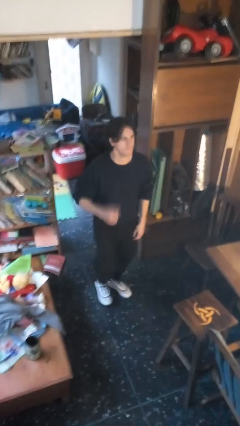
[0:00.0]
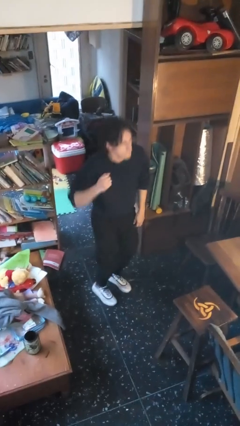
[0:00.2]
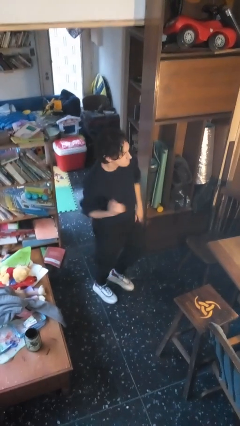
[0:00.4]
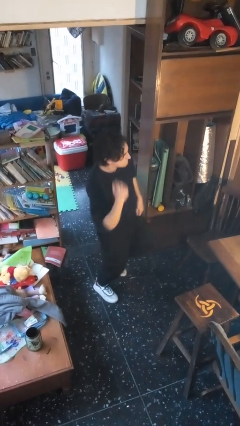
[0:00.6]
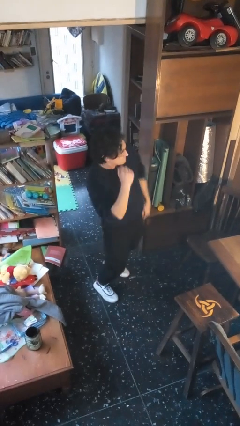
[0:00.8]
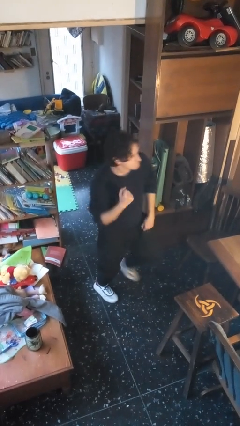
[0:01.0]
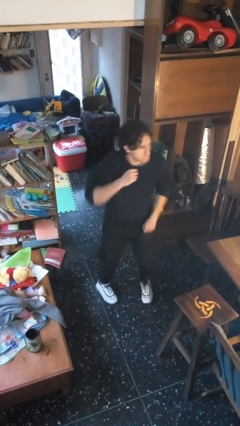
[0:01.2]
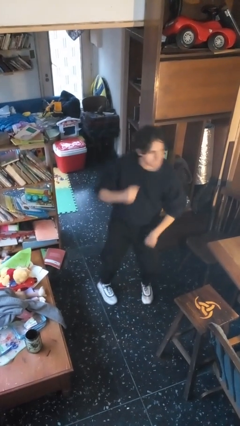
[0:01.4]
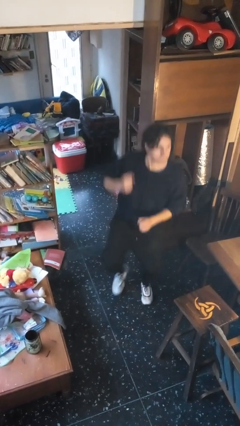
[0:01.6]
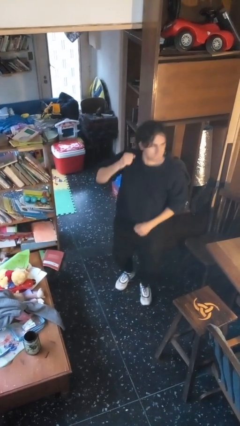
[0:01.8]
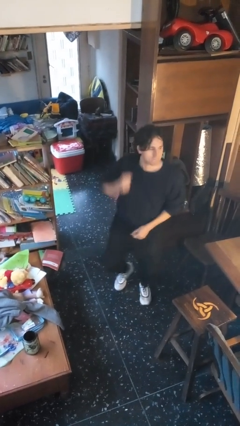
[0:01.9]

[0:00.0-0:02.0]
person dances in place

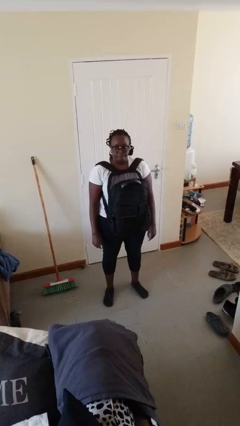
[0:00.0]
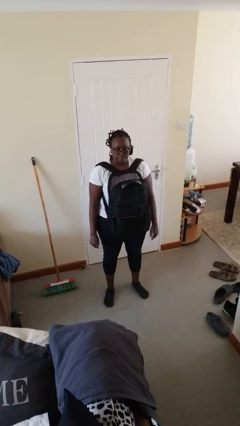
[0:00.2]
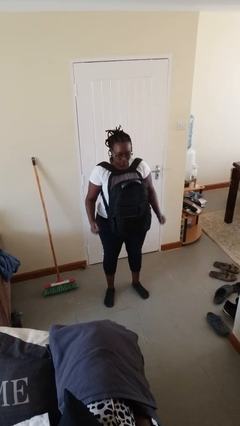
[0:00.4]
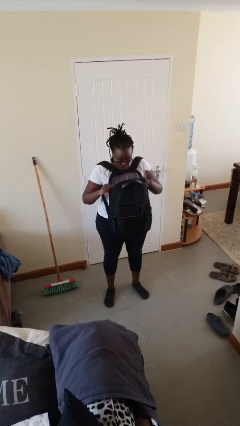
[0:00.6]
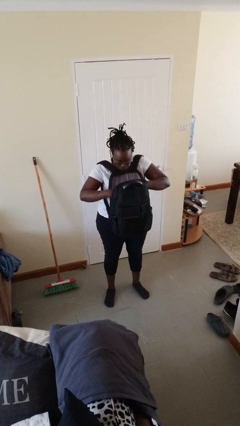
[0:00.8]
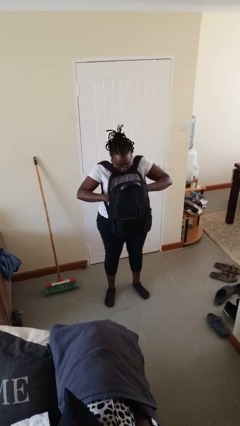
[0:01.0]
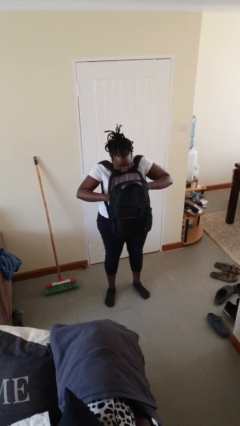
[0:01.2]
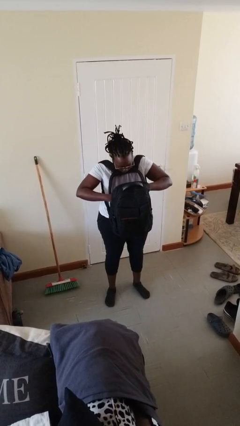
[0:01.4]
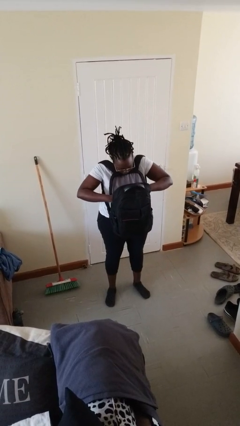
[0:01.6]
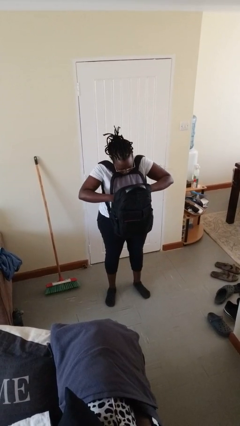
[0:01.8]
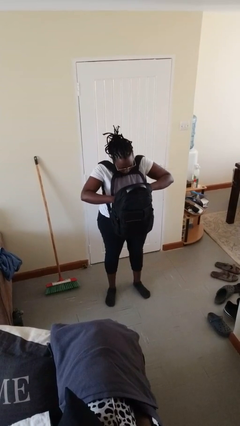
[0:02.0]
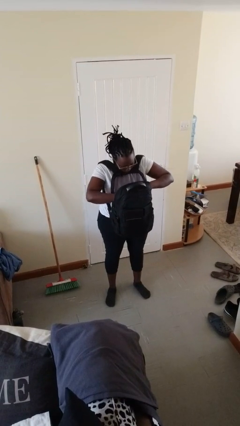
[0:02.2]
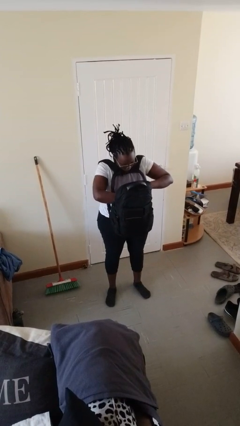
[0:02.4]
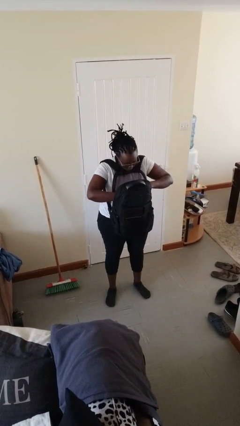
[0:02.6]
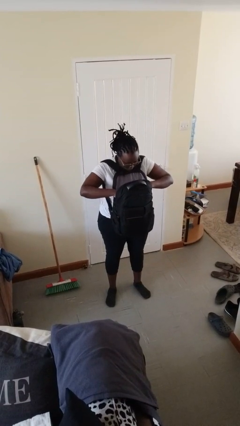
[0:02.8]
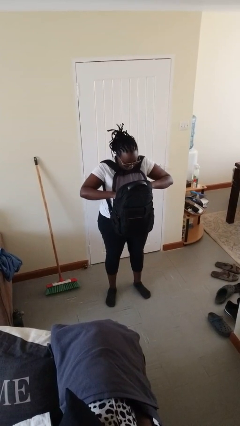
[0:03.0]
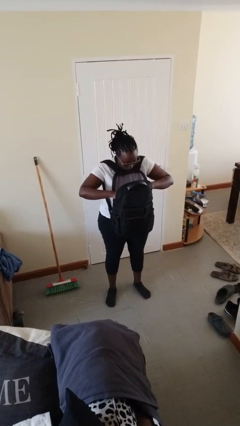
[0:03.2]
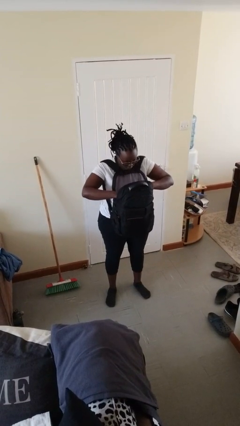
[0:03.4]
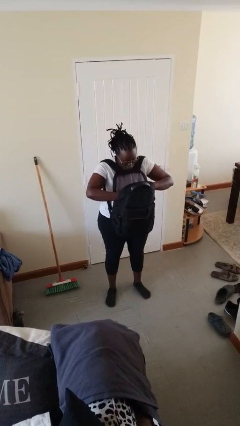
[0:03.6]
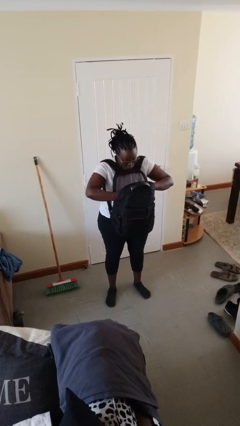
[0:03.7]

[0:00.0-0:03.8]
person searches in backpack

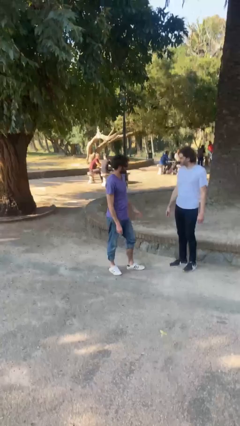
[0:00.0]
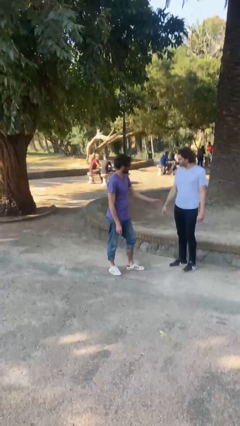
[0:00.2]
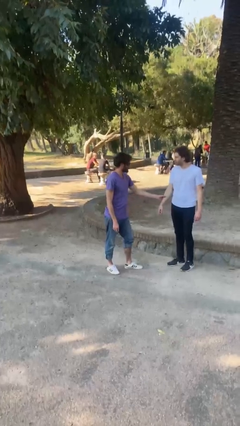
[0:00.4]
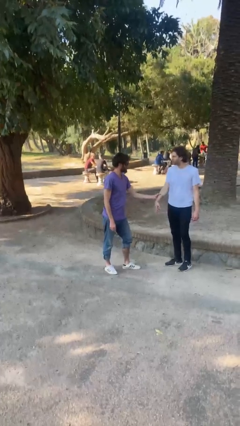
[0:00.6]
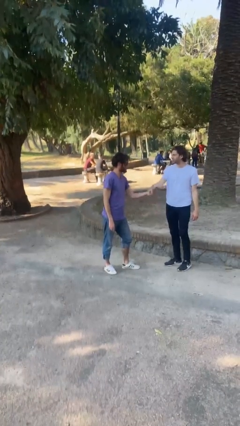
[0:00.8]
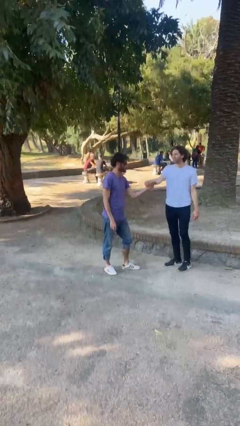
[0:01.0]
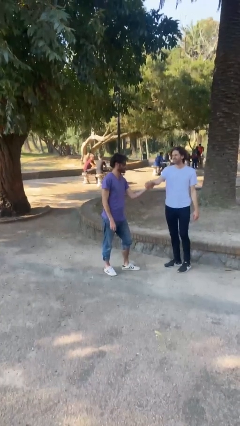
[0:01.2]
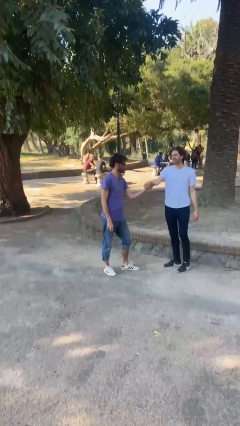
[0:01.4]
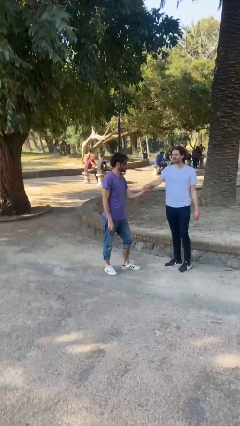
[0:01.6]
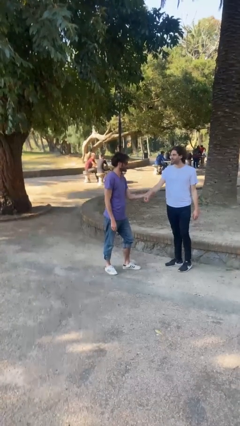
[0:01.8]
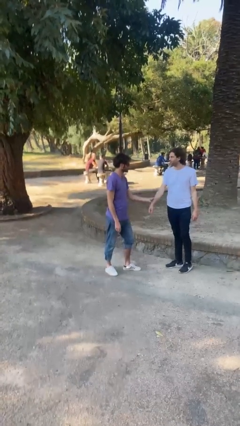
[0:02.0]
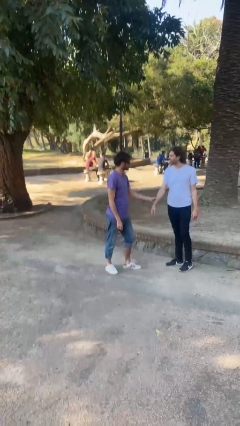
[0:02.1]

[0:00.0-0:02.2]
person grabs person by forearm

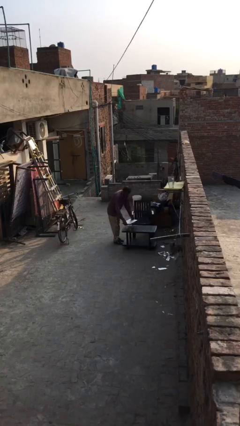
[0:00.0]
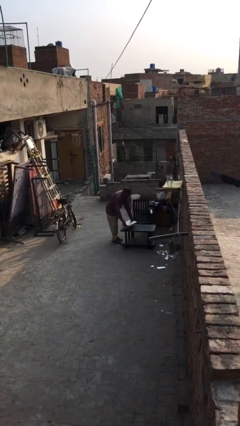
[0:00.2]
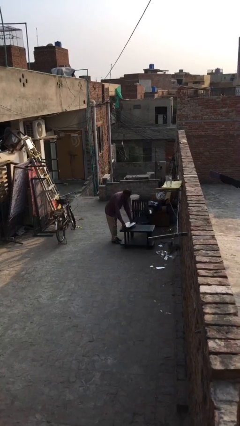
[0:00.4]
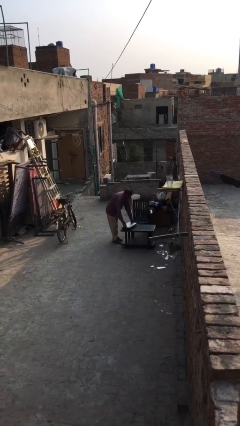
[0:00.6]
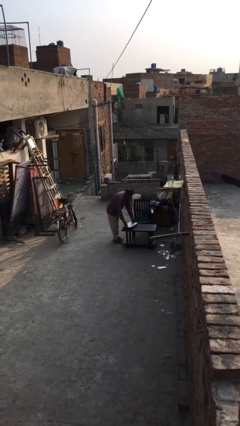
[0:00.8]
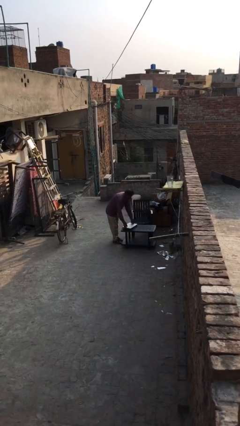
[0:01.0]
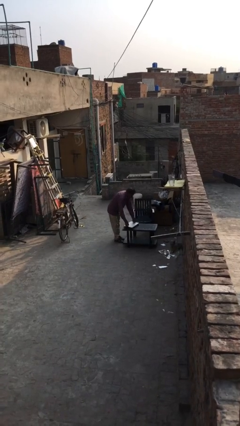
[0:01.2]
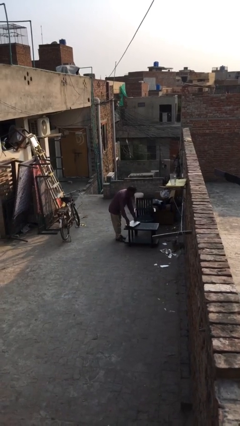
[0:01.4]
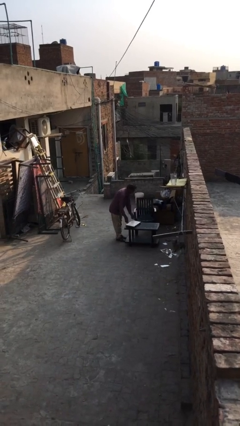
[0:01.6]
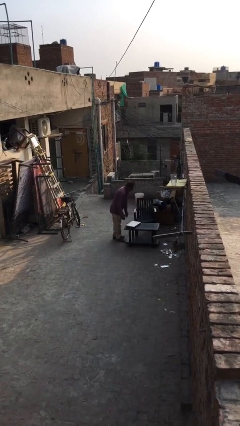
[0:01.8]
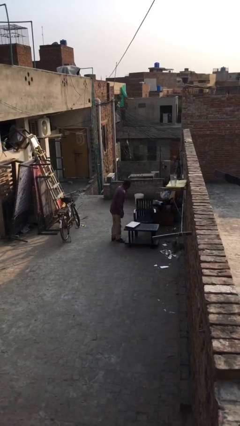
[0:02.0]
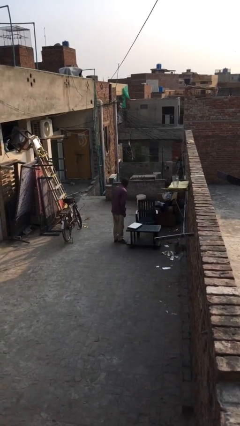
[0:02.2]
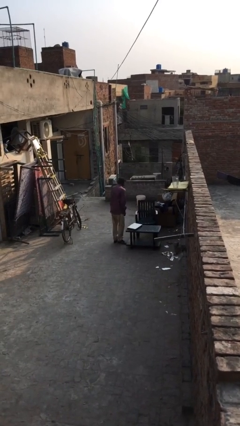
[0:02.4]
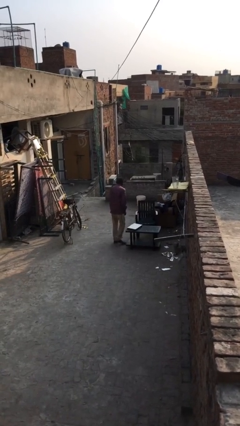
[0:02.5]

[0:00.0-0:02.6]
person puts down object on table

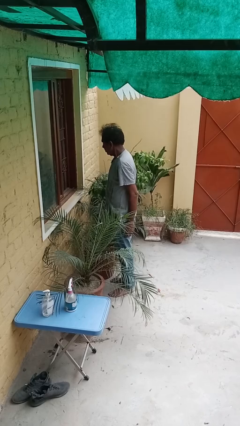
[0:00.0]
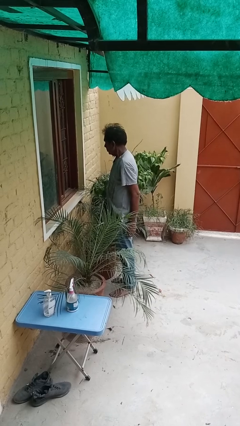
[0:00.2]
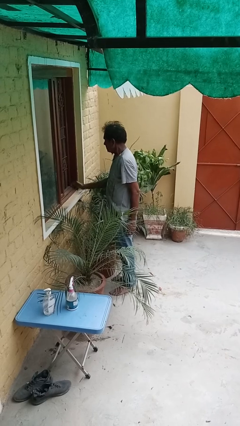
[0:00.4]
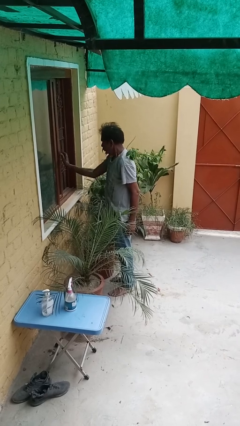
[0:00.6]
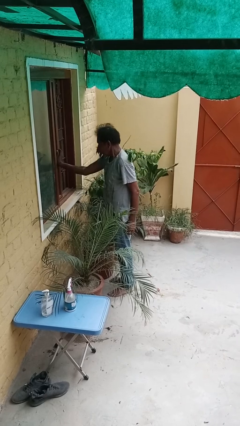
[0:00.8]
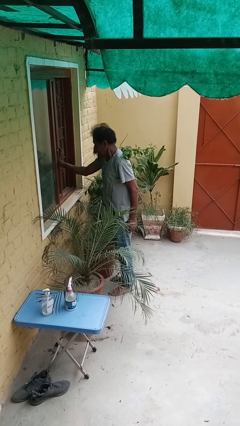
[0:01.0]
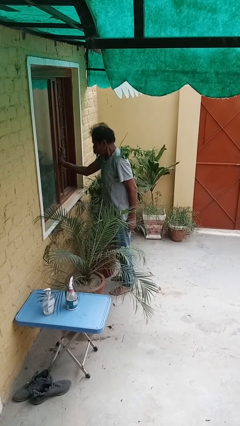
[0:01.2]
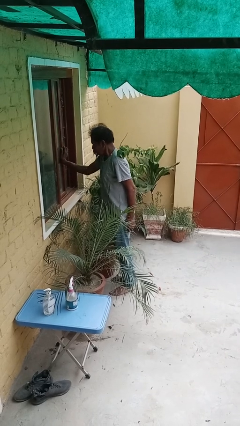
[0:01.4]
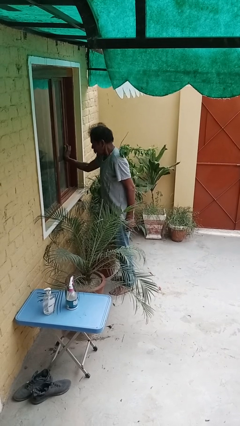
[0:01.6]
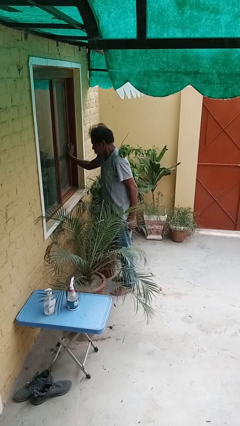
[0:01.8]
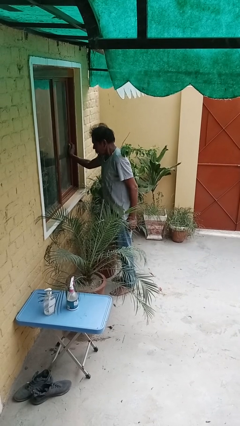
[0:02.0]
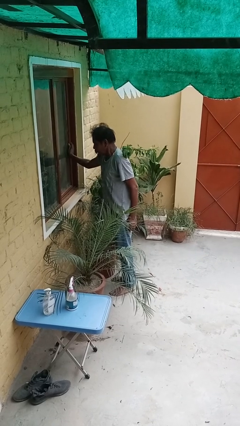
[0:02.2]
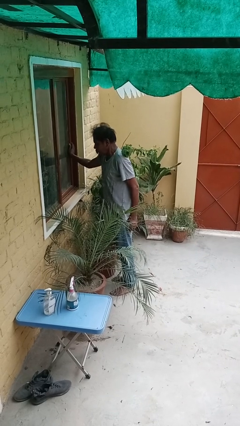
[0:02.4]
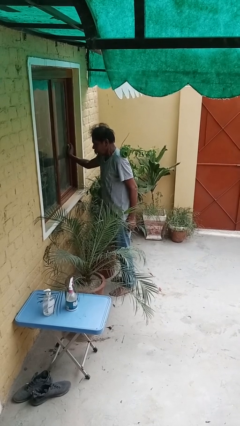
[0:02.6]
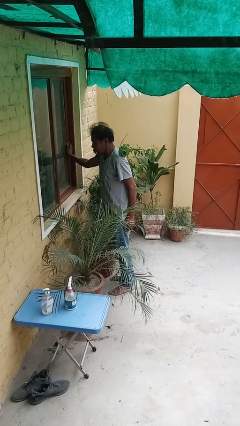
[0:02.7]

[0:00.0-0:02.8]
person closes home window

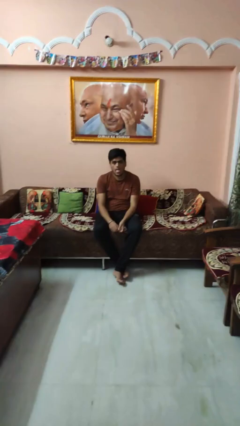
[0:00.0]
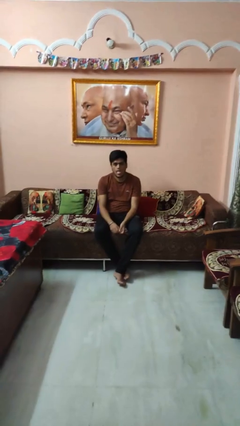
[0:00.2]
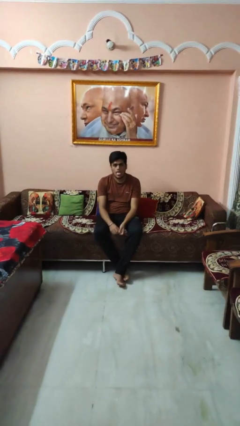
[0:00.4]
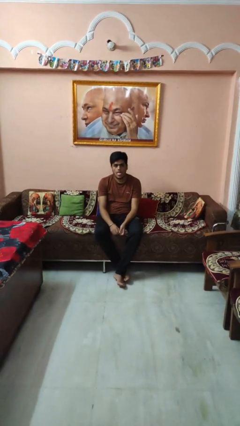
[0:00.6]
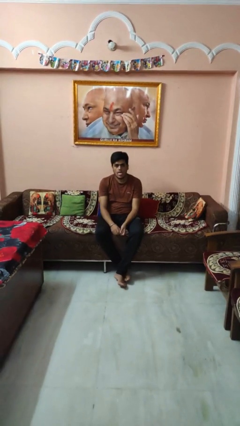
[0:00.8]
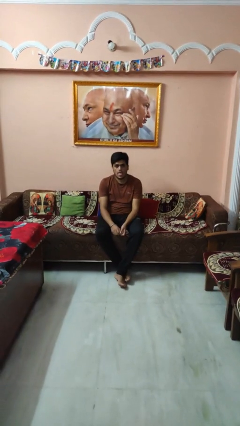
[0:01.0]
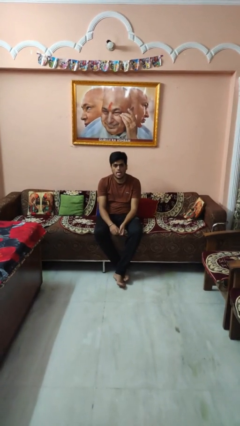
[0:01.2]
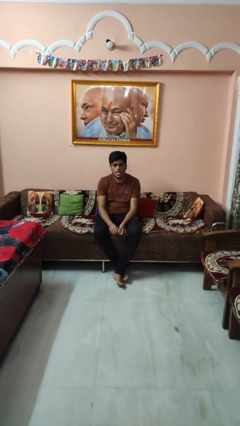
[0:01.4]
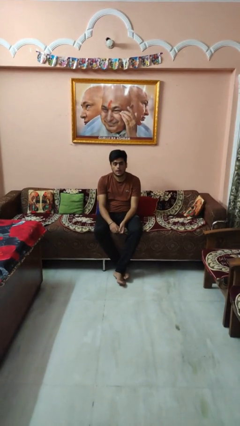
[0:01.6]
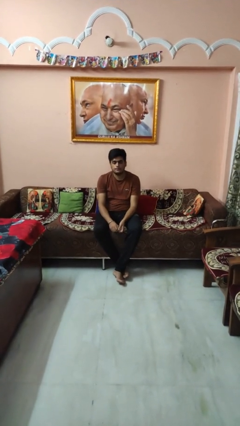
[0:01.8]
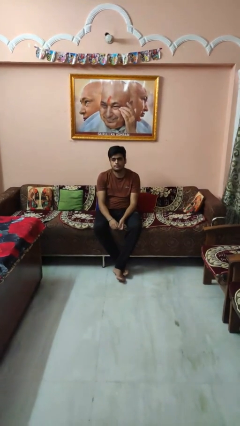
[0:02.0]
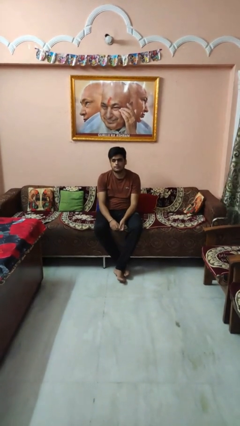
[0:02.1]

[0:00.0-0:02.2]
person sticks out tongue

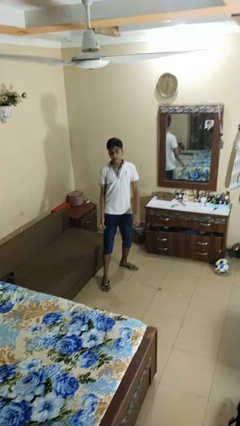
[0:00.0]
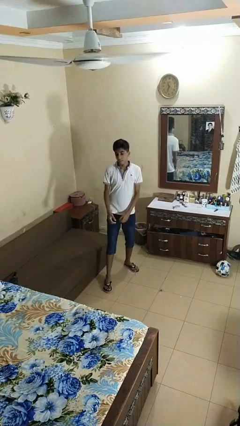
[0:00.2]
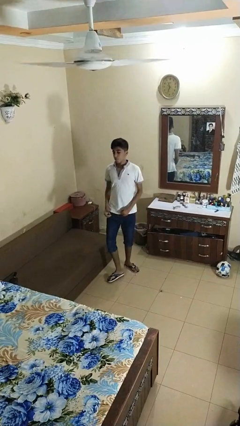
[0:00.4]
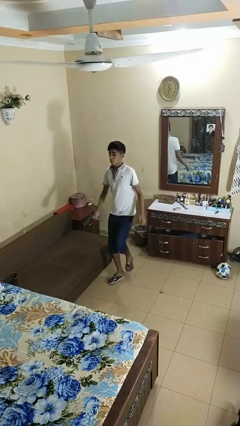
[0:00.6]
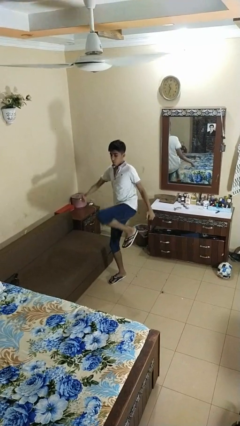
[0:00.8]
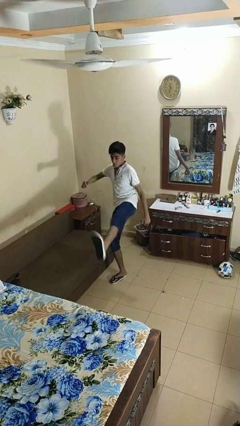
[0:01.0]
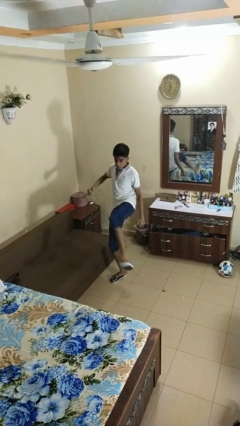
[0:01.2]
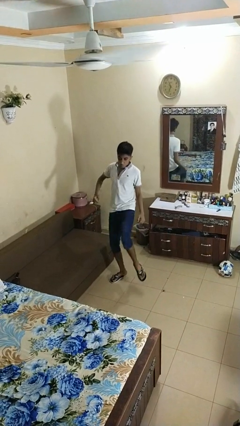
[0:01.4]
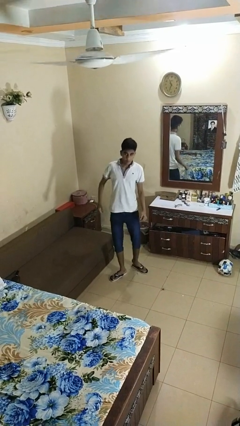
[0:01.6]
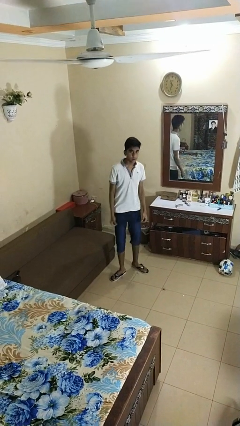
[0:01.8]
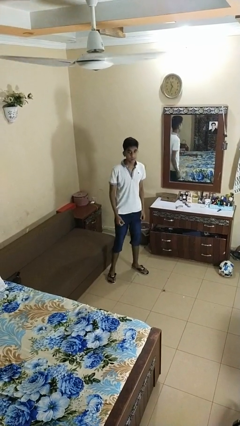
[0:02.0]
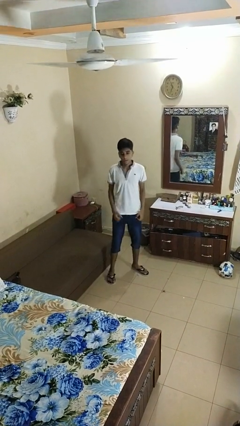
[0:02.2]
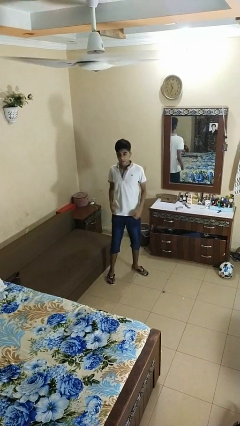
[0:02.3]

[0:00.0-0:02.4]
person karate kicks
